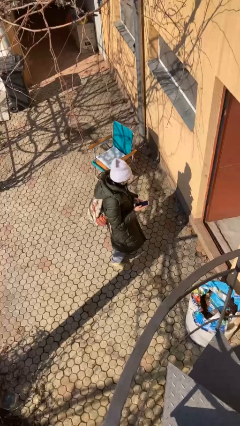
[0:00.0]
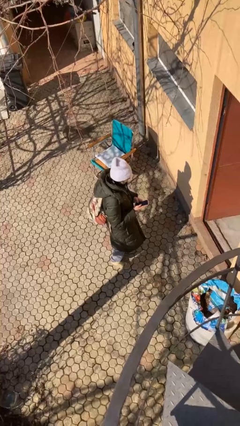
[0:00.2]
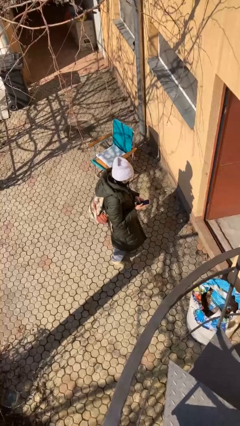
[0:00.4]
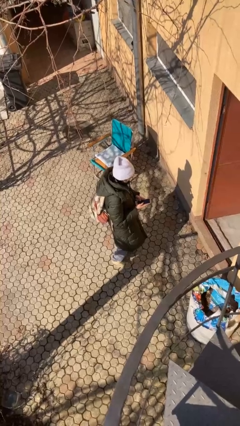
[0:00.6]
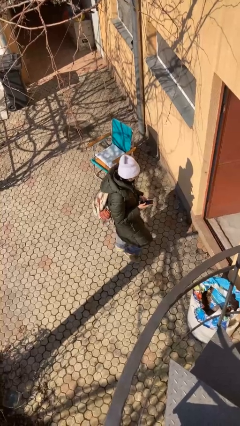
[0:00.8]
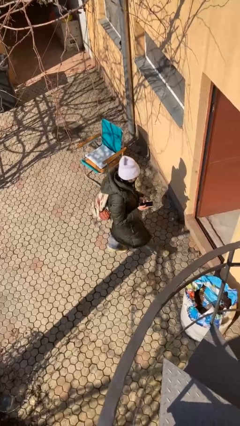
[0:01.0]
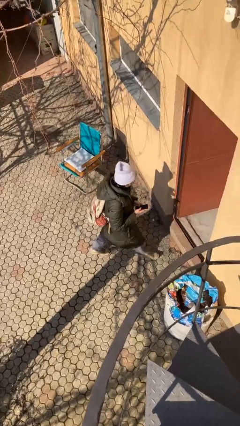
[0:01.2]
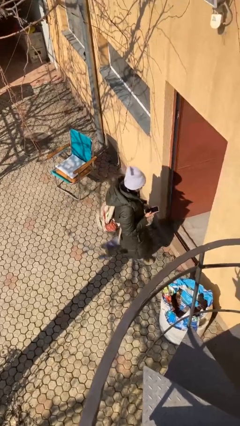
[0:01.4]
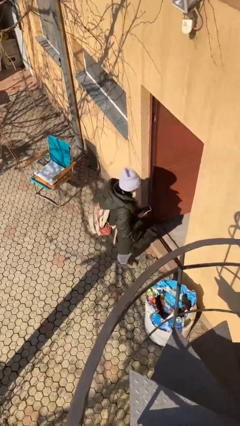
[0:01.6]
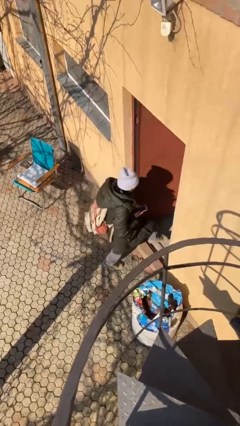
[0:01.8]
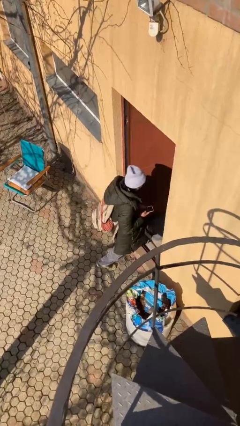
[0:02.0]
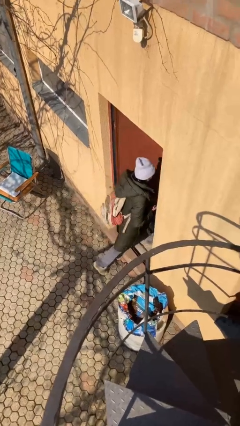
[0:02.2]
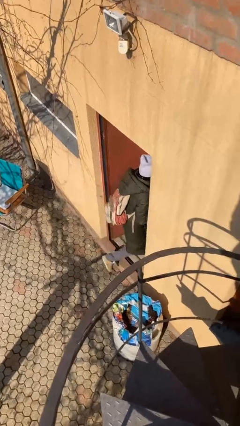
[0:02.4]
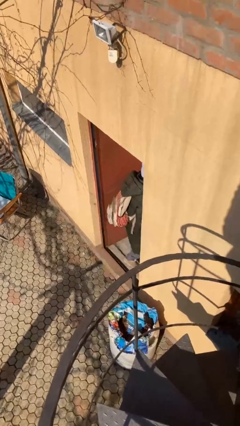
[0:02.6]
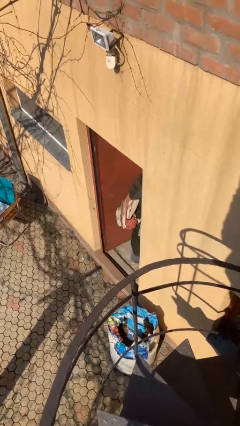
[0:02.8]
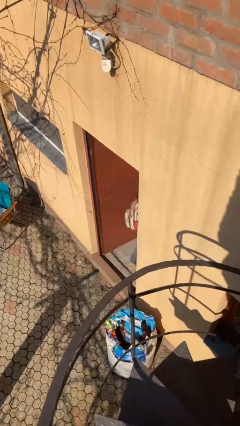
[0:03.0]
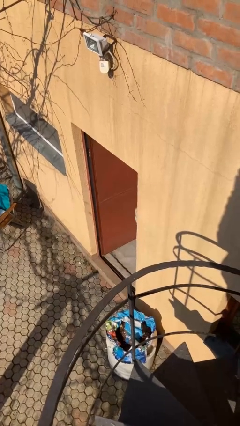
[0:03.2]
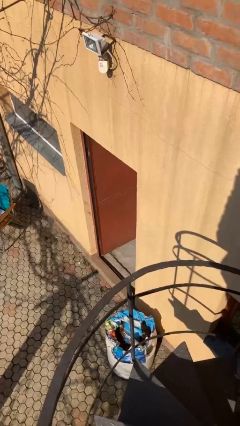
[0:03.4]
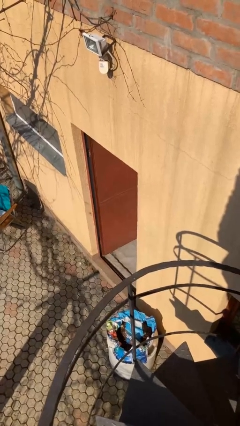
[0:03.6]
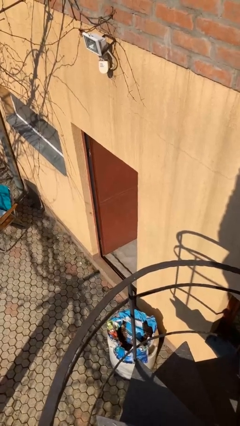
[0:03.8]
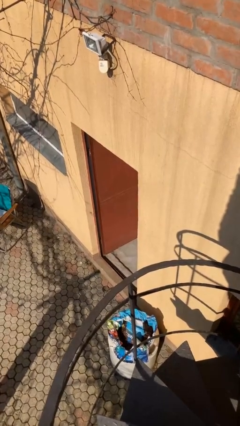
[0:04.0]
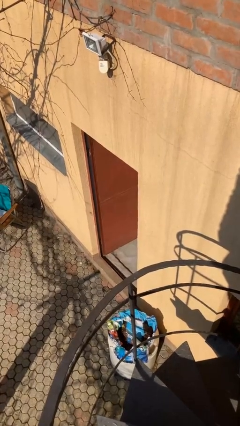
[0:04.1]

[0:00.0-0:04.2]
person exits scene through structure

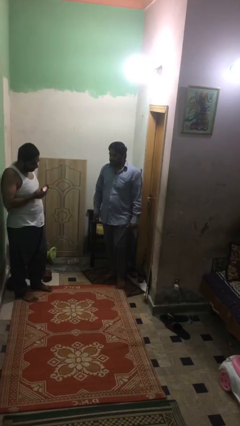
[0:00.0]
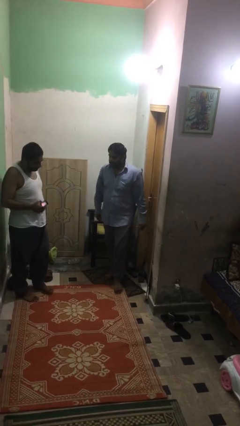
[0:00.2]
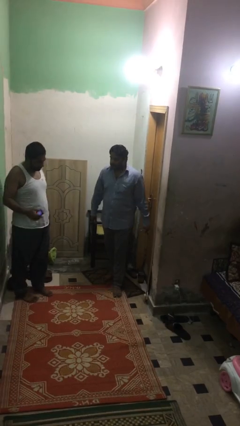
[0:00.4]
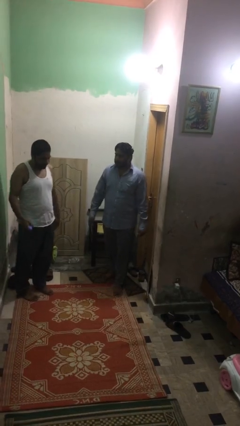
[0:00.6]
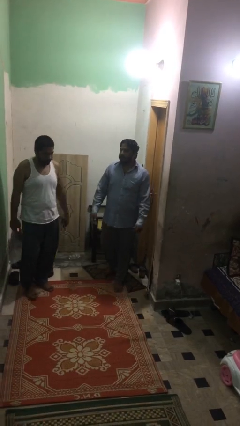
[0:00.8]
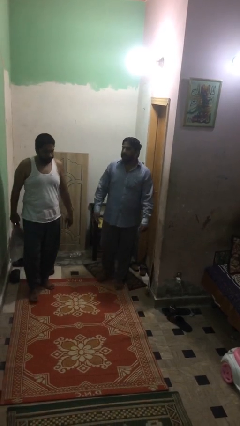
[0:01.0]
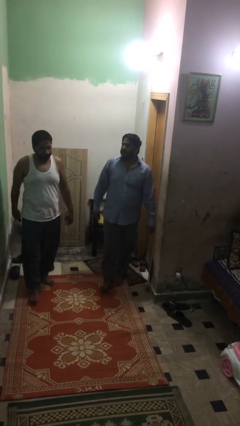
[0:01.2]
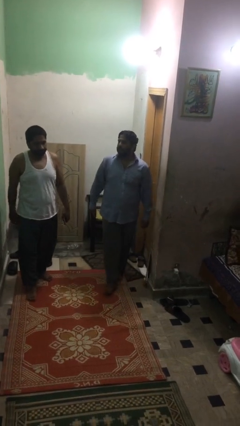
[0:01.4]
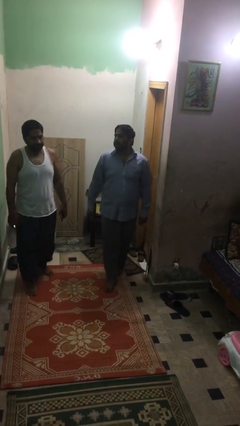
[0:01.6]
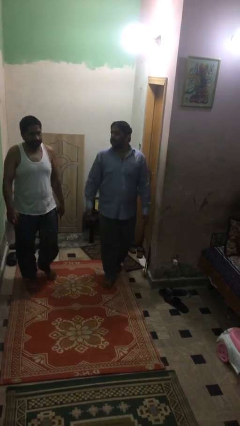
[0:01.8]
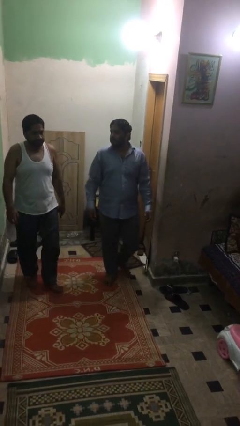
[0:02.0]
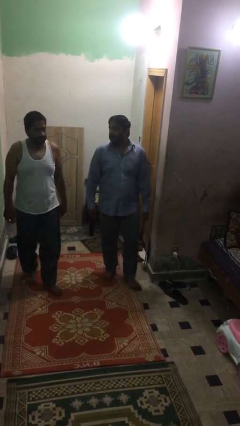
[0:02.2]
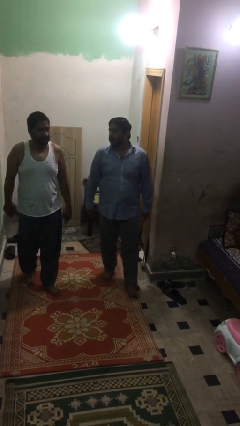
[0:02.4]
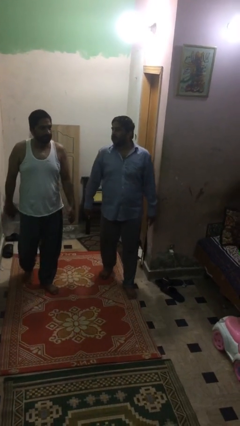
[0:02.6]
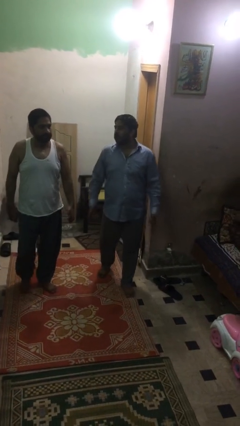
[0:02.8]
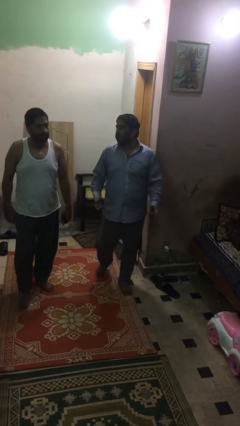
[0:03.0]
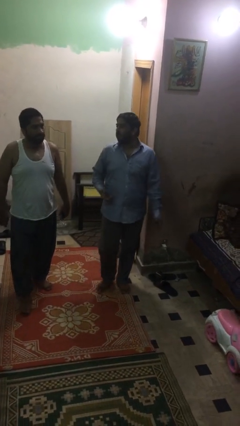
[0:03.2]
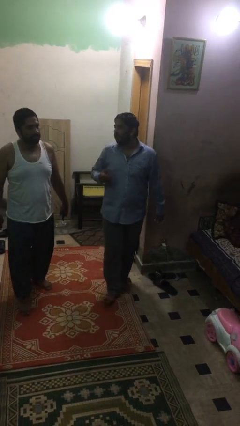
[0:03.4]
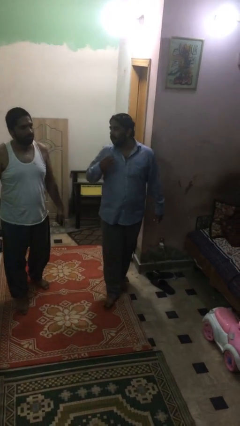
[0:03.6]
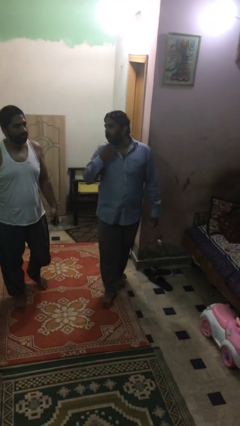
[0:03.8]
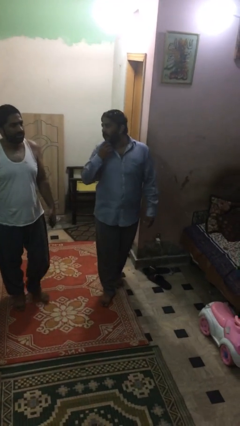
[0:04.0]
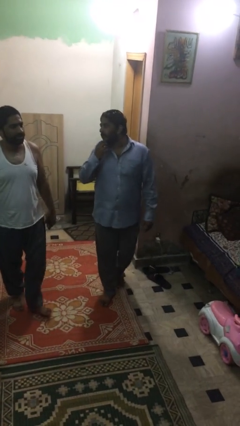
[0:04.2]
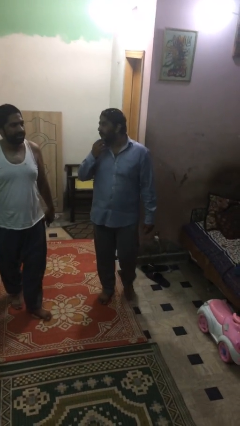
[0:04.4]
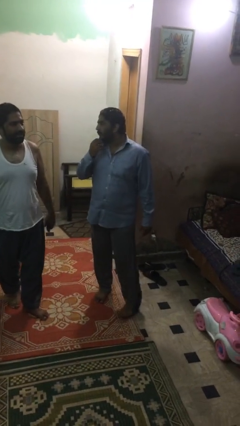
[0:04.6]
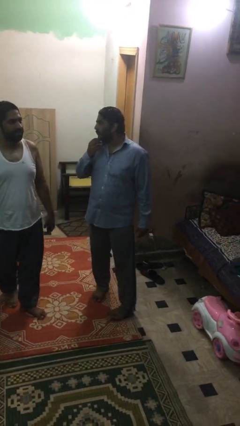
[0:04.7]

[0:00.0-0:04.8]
person talks to person

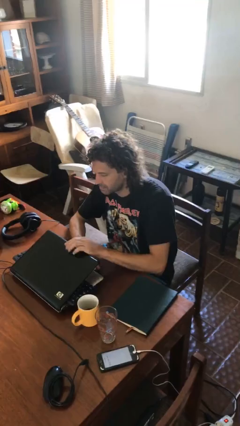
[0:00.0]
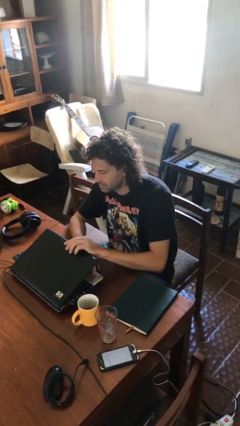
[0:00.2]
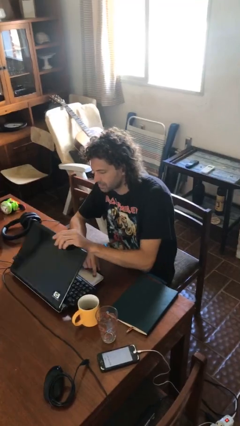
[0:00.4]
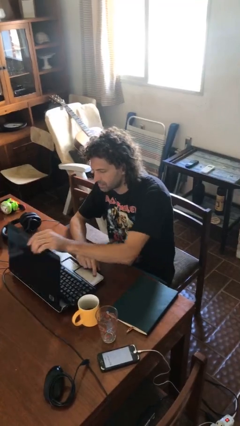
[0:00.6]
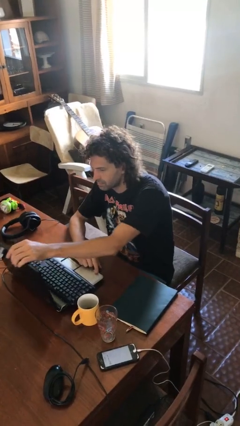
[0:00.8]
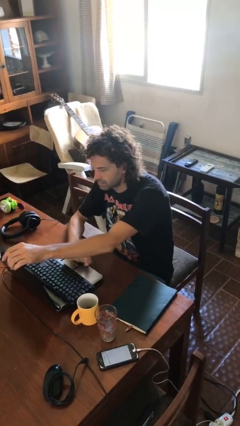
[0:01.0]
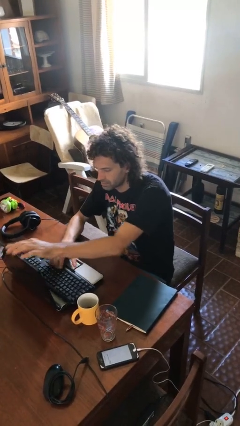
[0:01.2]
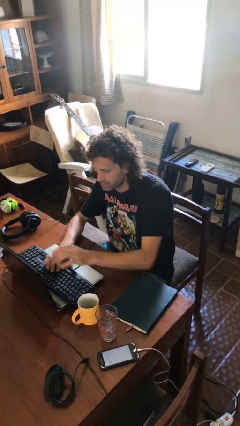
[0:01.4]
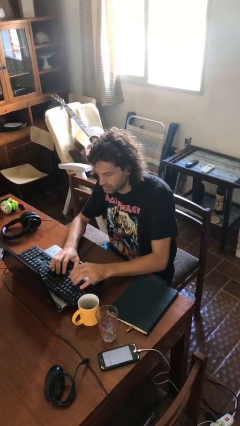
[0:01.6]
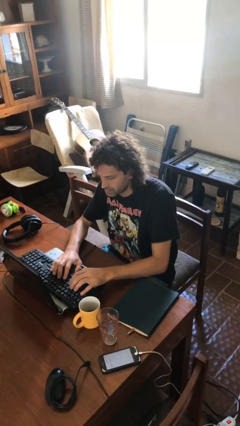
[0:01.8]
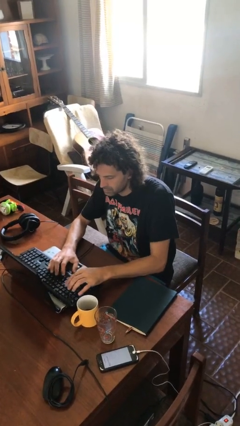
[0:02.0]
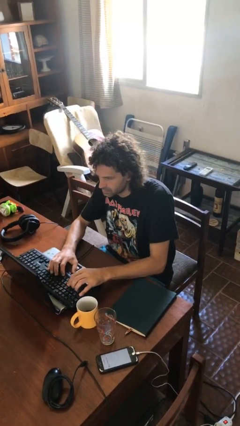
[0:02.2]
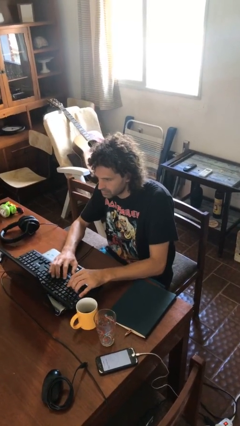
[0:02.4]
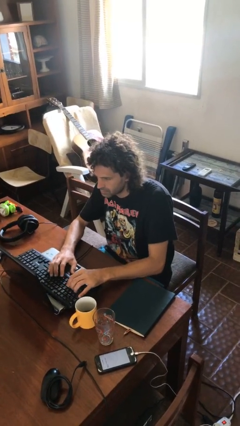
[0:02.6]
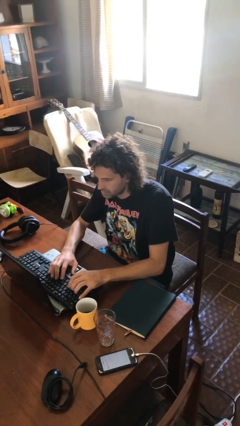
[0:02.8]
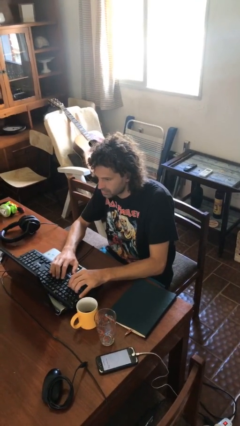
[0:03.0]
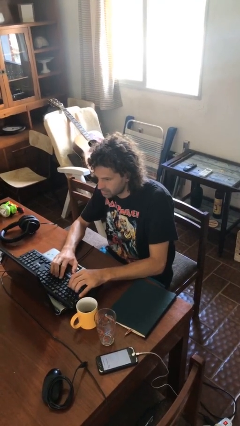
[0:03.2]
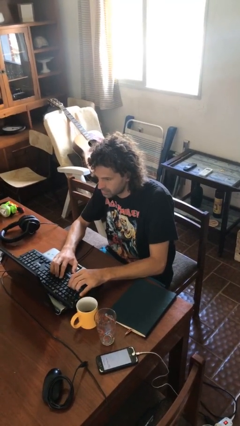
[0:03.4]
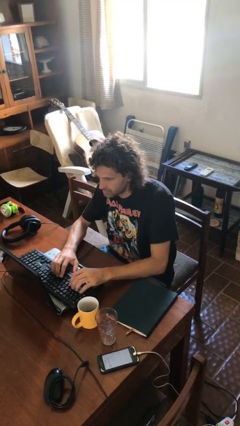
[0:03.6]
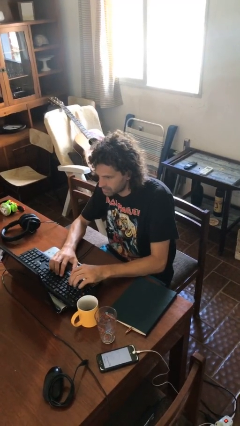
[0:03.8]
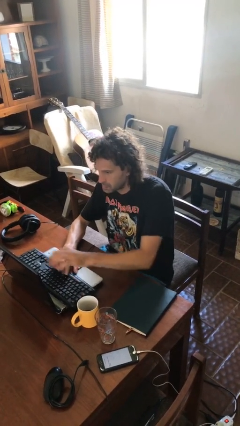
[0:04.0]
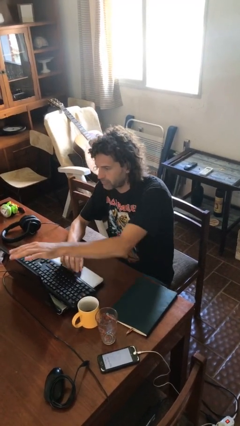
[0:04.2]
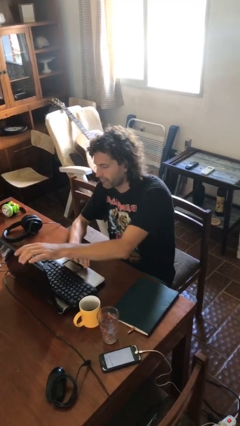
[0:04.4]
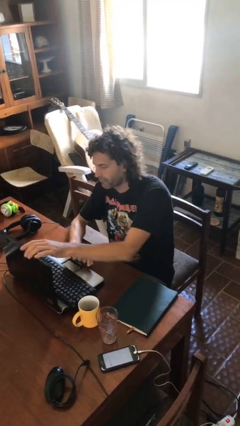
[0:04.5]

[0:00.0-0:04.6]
person interacts with laptop

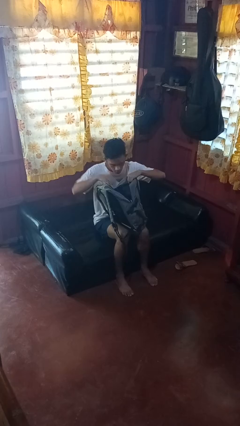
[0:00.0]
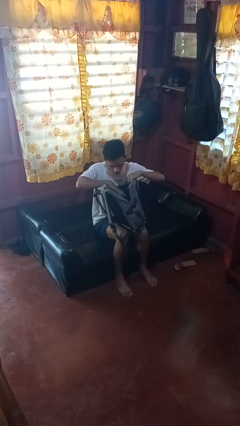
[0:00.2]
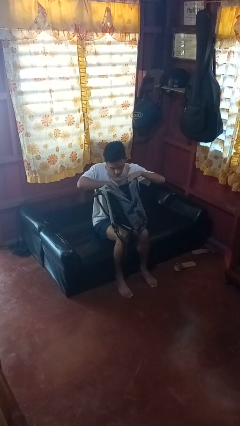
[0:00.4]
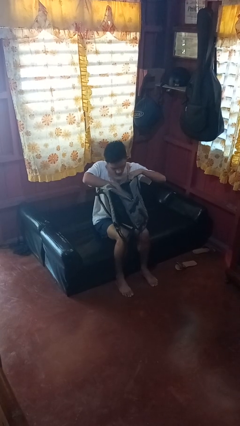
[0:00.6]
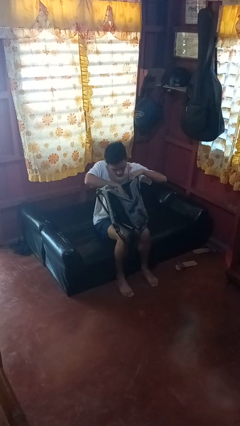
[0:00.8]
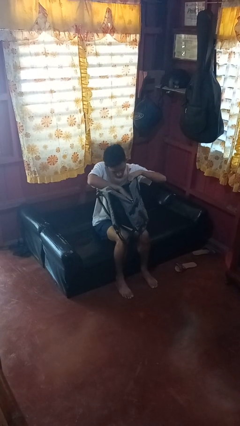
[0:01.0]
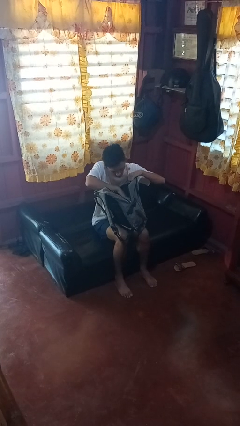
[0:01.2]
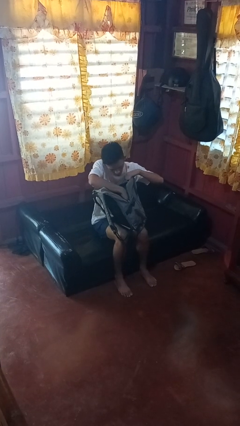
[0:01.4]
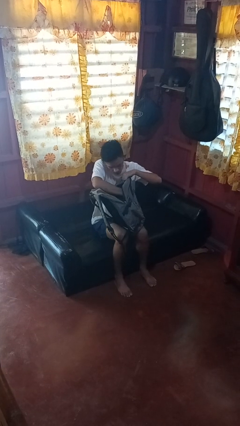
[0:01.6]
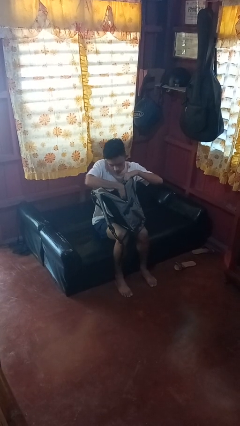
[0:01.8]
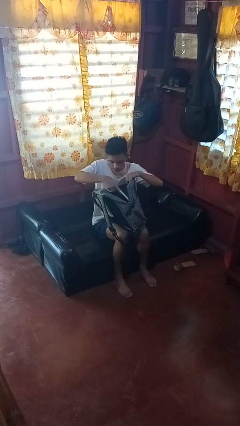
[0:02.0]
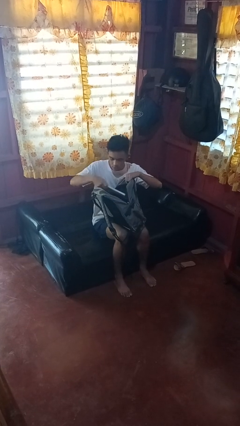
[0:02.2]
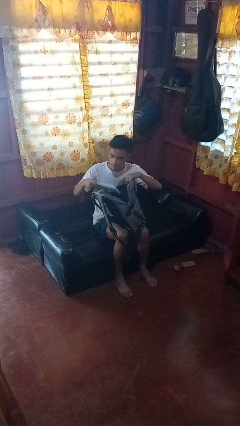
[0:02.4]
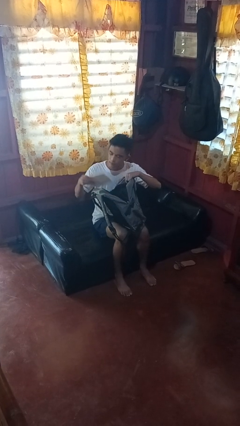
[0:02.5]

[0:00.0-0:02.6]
person searches in backpack

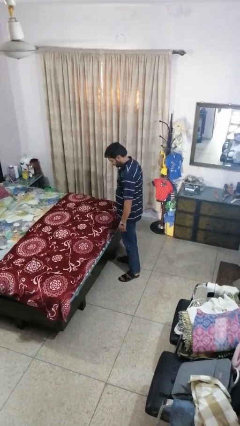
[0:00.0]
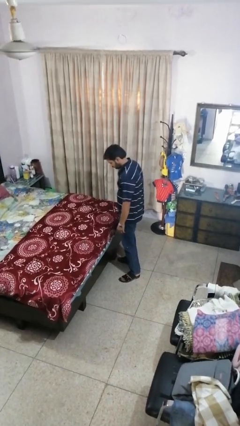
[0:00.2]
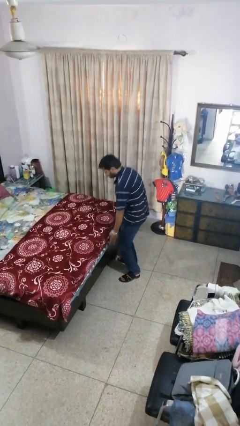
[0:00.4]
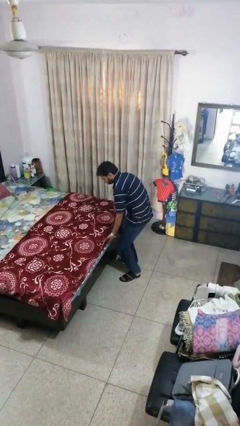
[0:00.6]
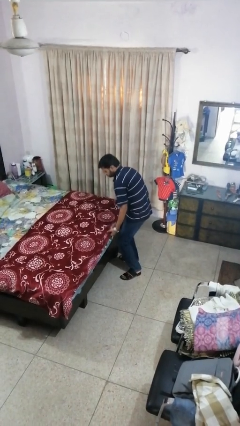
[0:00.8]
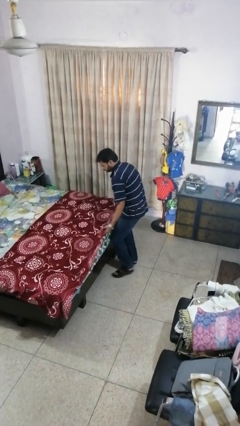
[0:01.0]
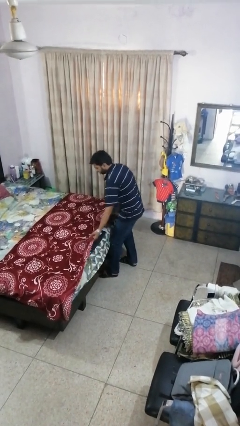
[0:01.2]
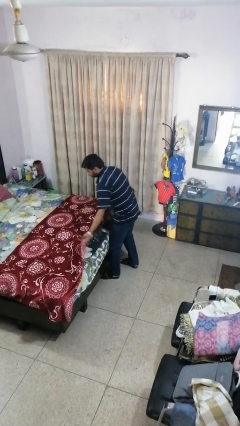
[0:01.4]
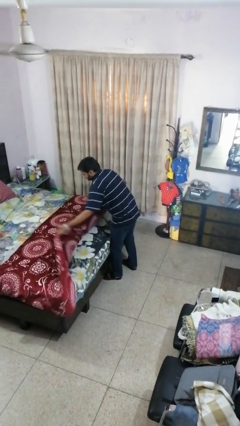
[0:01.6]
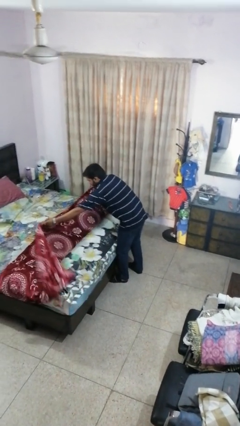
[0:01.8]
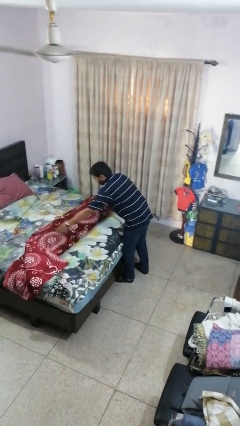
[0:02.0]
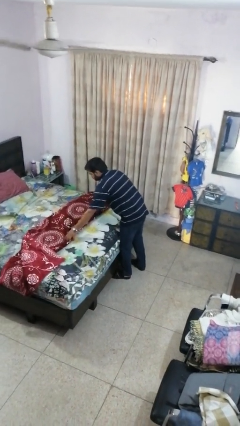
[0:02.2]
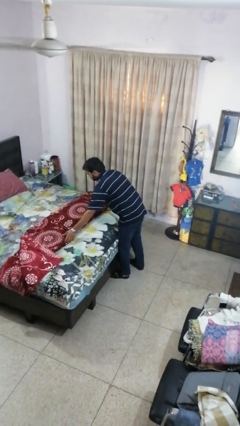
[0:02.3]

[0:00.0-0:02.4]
person crumples paper
